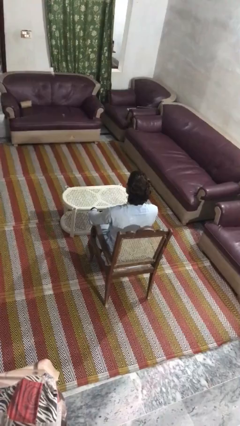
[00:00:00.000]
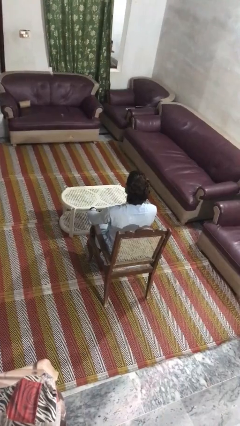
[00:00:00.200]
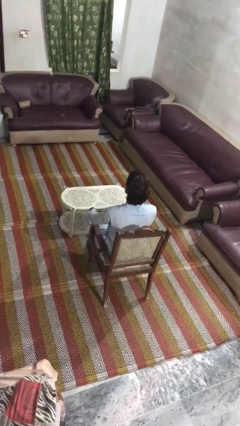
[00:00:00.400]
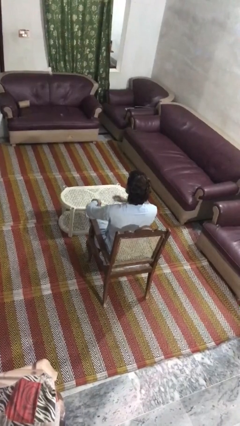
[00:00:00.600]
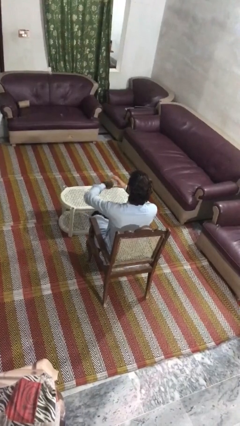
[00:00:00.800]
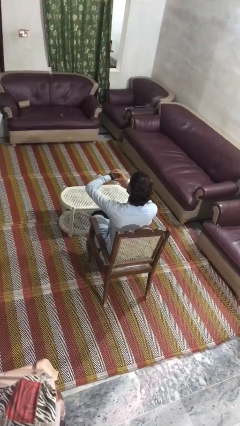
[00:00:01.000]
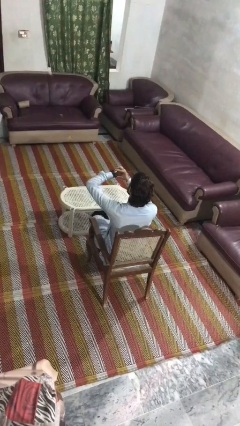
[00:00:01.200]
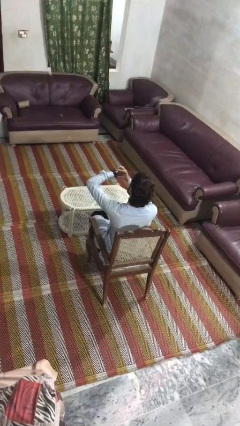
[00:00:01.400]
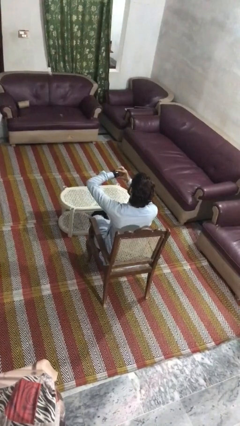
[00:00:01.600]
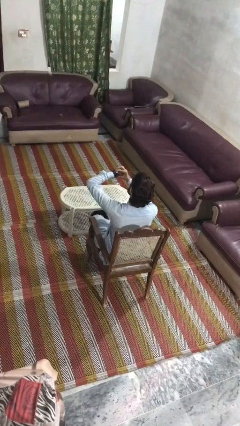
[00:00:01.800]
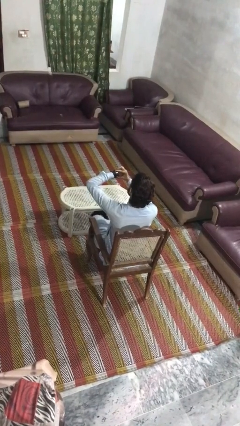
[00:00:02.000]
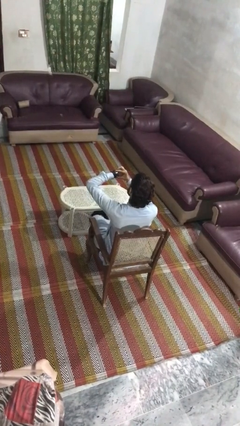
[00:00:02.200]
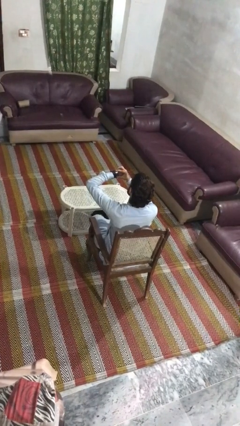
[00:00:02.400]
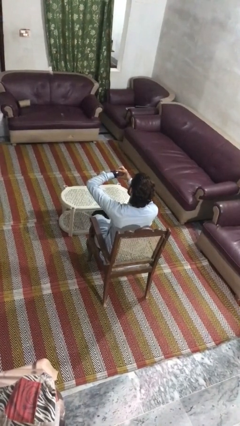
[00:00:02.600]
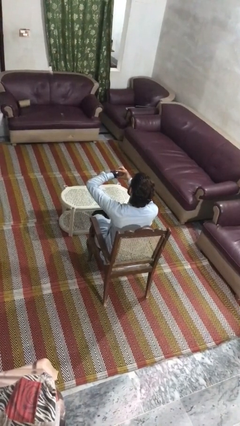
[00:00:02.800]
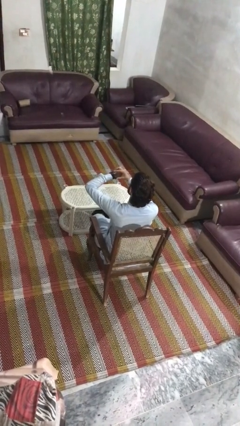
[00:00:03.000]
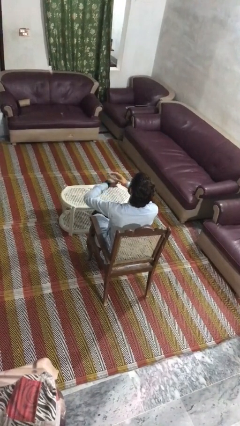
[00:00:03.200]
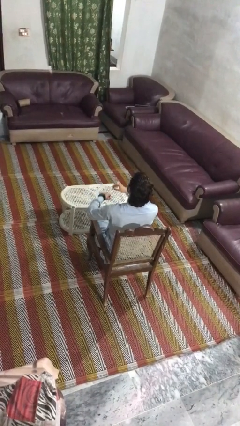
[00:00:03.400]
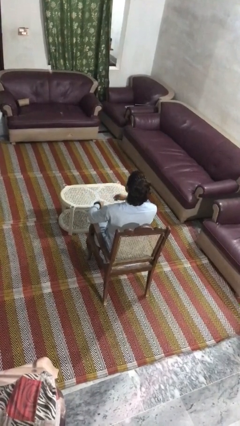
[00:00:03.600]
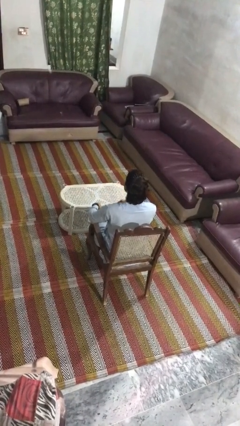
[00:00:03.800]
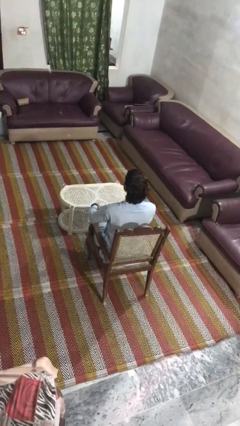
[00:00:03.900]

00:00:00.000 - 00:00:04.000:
person looks at wristwatch

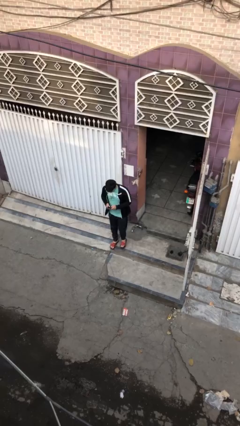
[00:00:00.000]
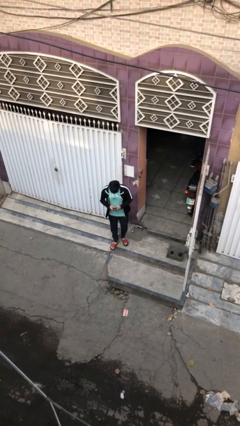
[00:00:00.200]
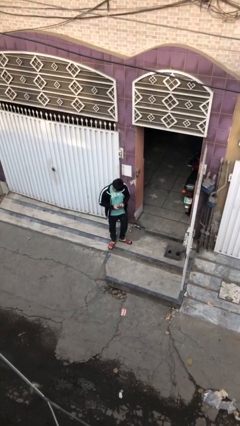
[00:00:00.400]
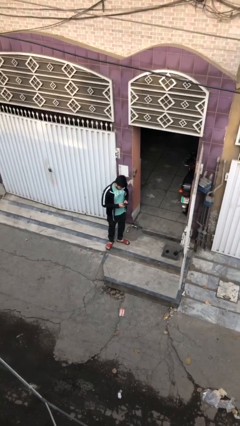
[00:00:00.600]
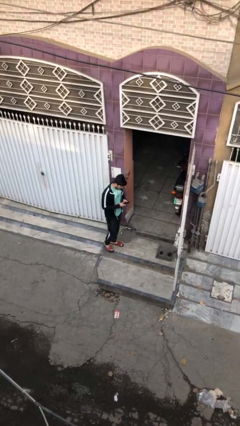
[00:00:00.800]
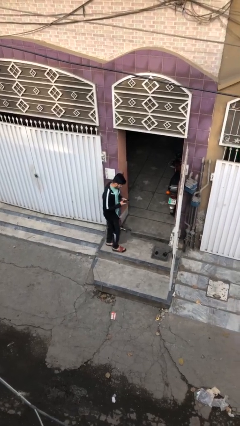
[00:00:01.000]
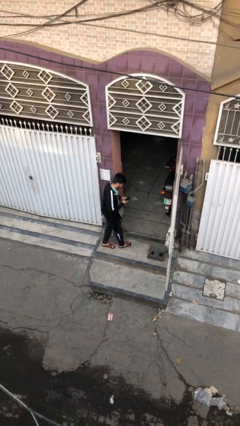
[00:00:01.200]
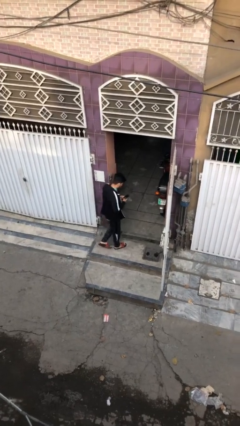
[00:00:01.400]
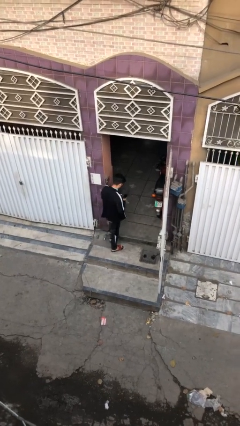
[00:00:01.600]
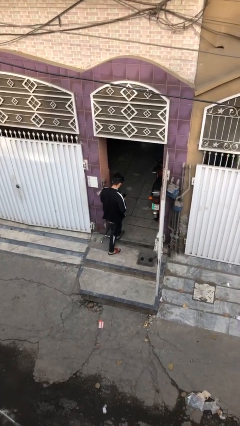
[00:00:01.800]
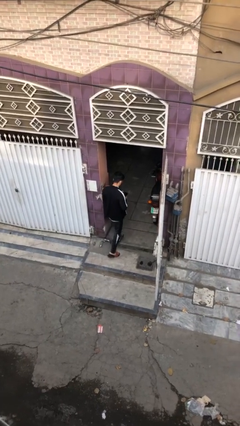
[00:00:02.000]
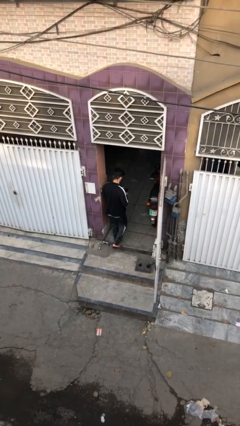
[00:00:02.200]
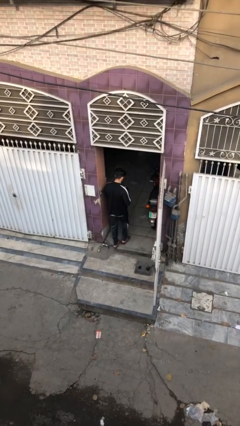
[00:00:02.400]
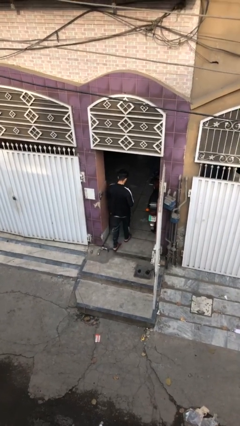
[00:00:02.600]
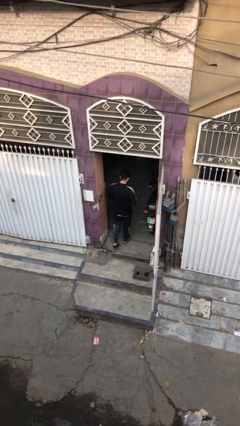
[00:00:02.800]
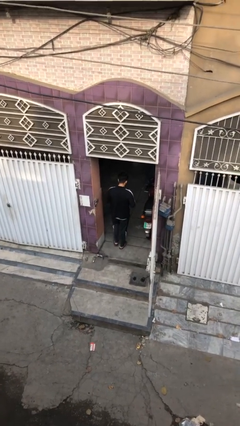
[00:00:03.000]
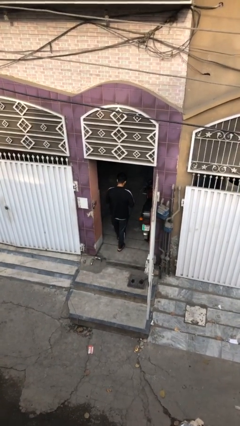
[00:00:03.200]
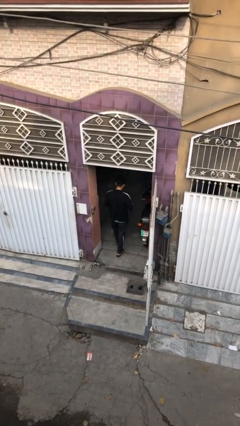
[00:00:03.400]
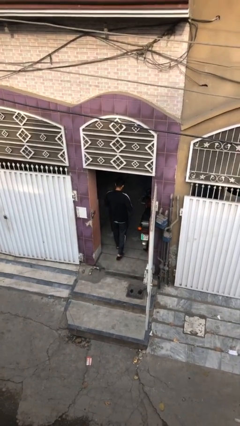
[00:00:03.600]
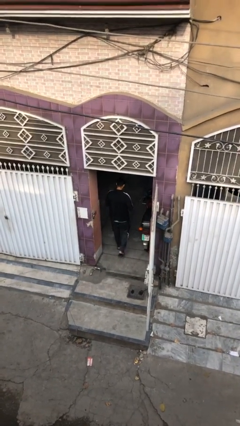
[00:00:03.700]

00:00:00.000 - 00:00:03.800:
person exits scene through structure

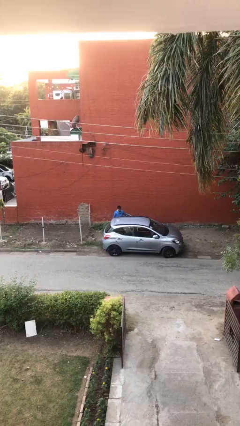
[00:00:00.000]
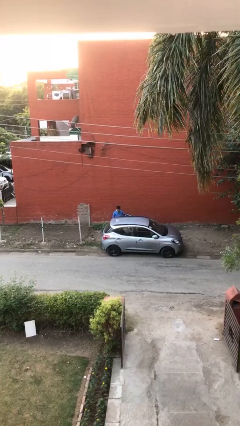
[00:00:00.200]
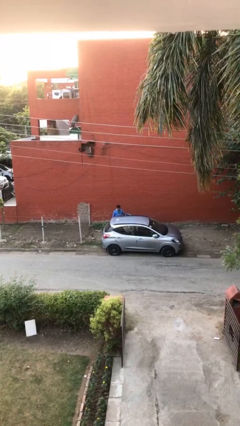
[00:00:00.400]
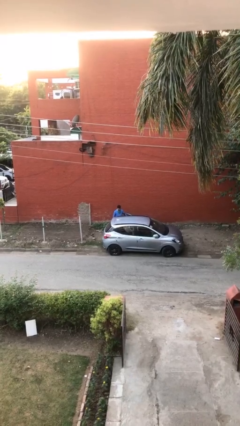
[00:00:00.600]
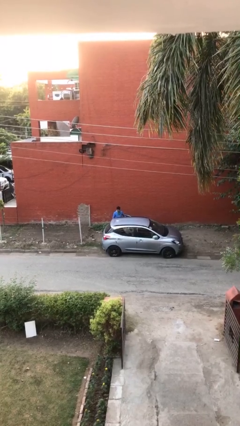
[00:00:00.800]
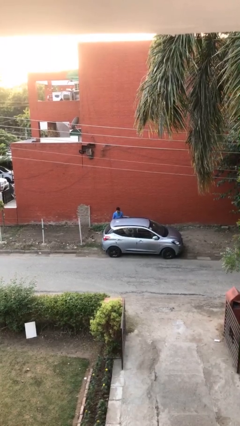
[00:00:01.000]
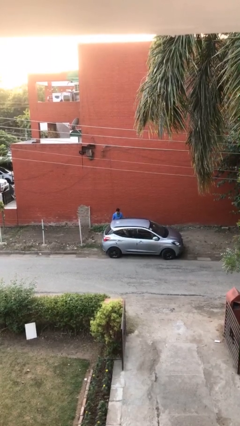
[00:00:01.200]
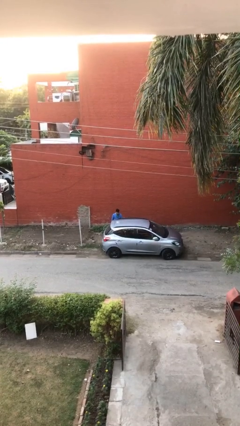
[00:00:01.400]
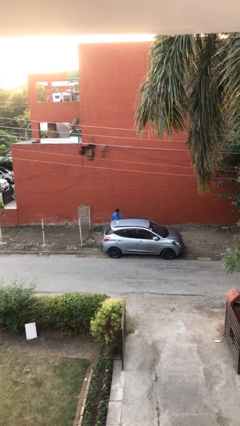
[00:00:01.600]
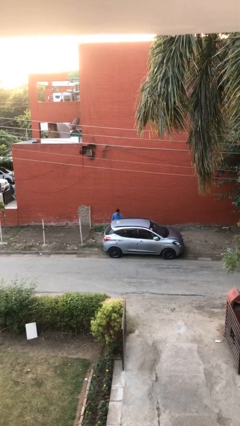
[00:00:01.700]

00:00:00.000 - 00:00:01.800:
person closes car door

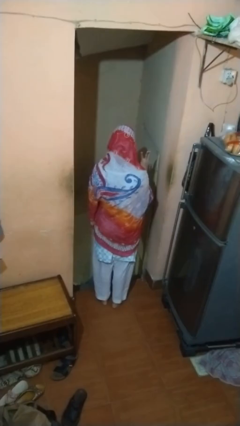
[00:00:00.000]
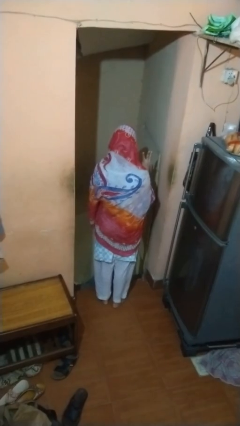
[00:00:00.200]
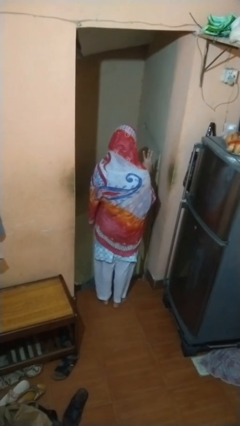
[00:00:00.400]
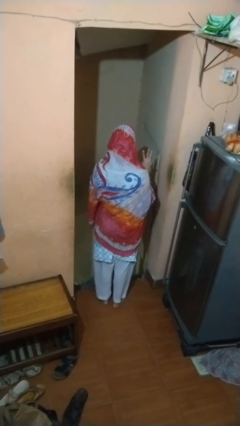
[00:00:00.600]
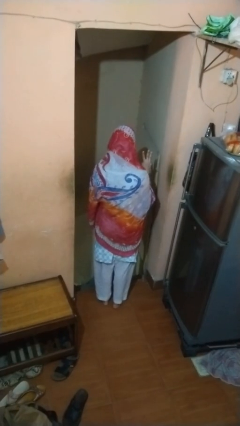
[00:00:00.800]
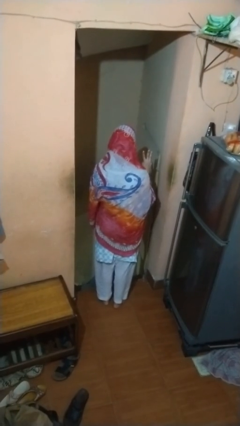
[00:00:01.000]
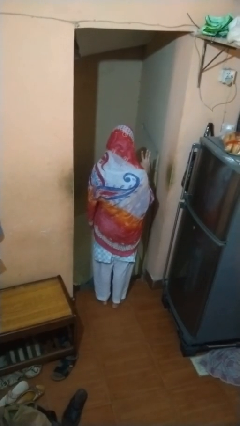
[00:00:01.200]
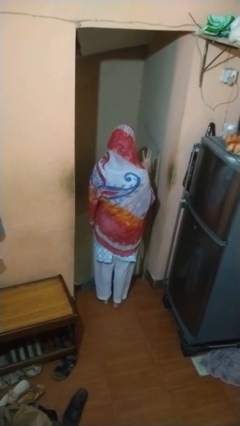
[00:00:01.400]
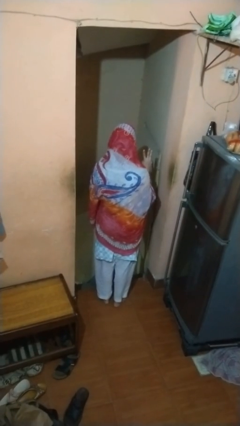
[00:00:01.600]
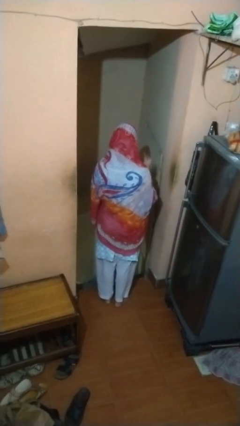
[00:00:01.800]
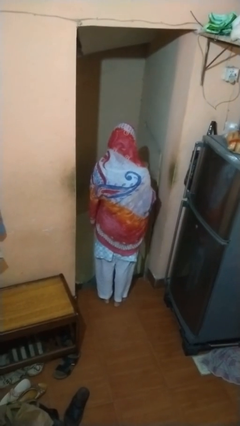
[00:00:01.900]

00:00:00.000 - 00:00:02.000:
person gestures number three

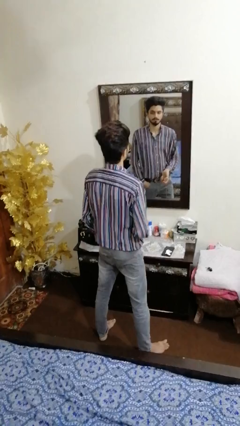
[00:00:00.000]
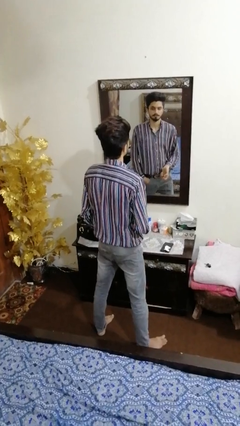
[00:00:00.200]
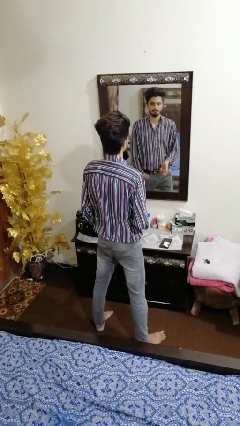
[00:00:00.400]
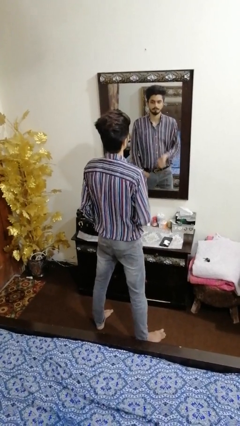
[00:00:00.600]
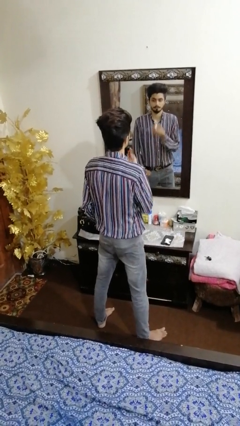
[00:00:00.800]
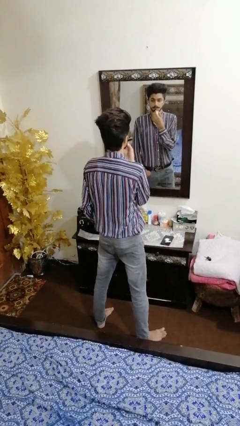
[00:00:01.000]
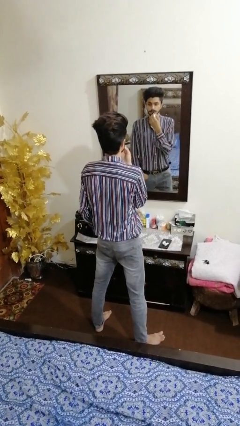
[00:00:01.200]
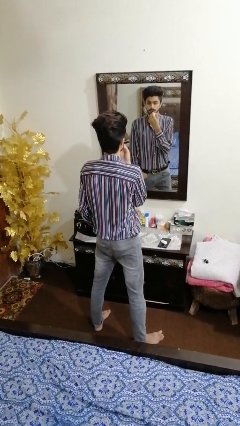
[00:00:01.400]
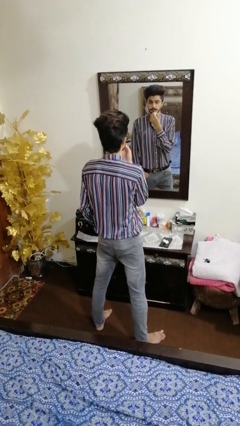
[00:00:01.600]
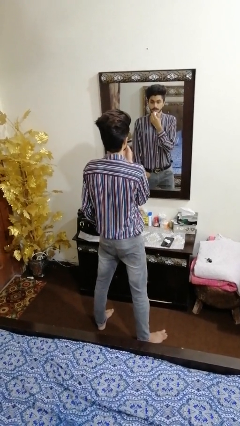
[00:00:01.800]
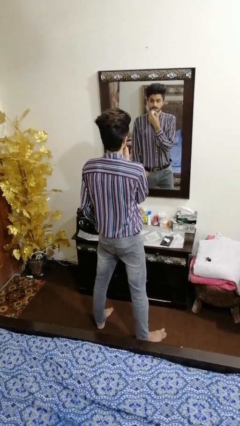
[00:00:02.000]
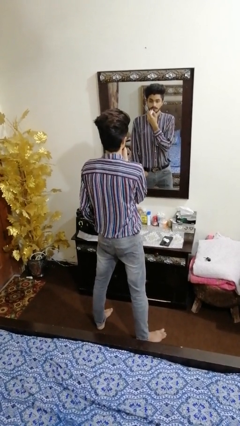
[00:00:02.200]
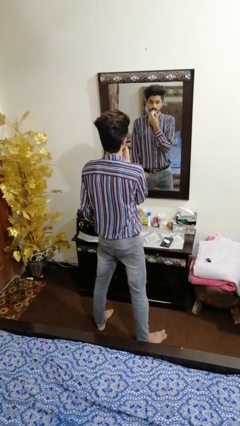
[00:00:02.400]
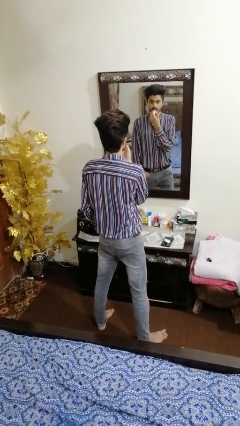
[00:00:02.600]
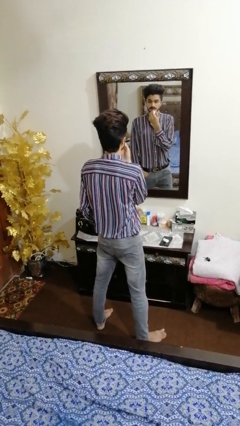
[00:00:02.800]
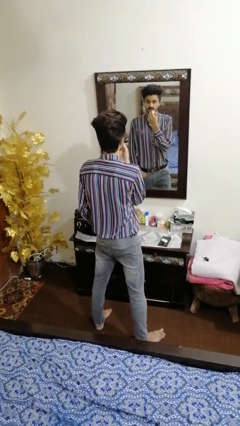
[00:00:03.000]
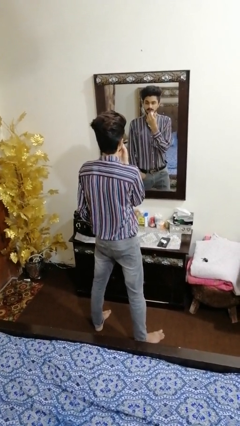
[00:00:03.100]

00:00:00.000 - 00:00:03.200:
person applies lip makeup

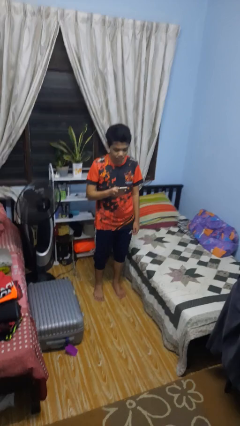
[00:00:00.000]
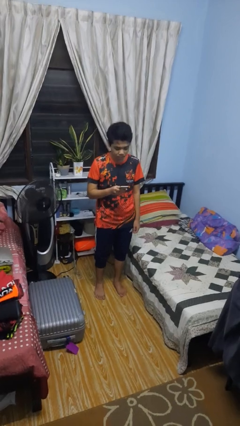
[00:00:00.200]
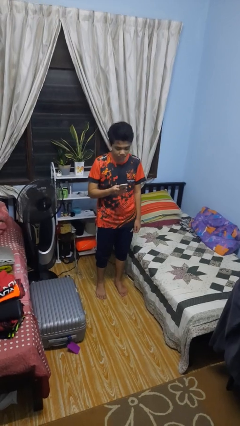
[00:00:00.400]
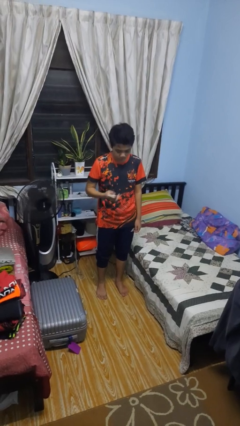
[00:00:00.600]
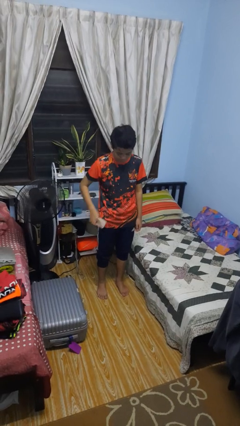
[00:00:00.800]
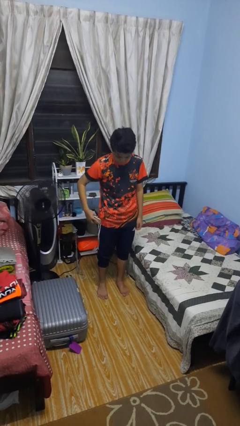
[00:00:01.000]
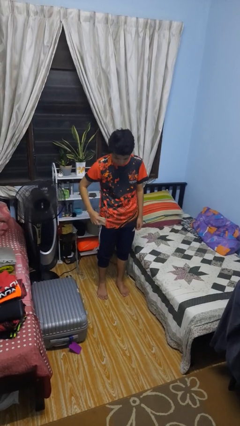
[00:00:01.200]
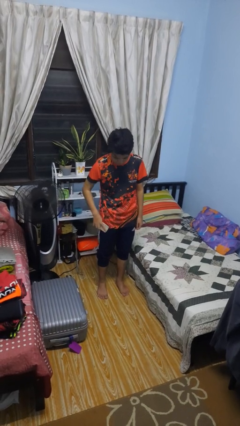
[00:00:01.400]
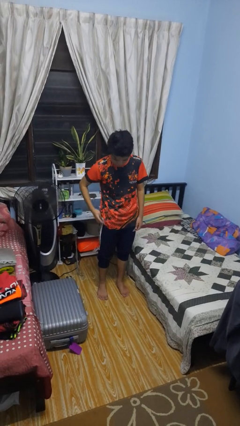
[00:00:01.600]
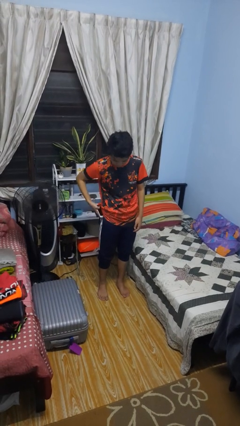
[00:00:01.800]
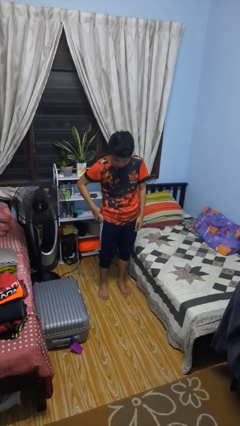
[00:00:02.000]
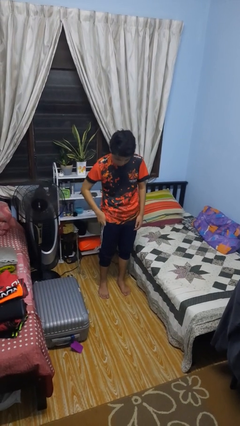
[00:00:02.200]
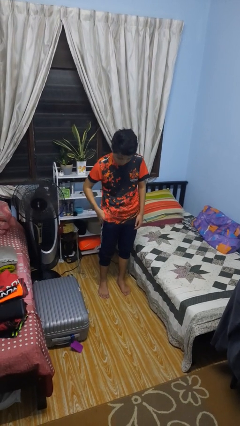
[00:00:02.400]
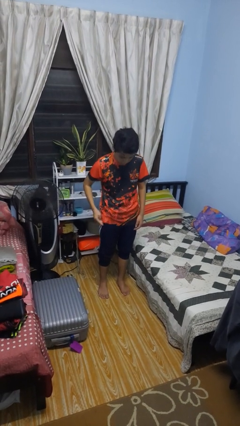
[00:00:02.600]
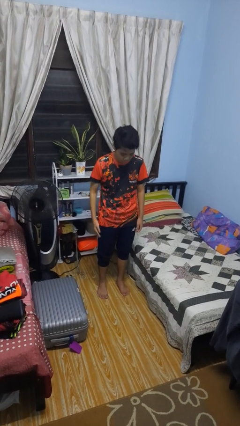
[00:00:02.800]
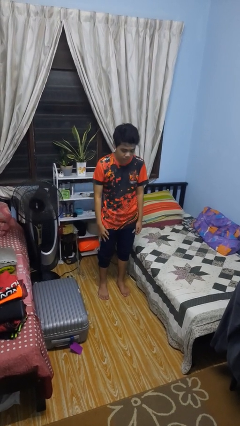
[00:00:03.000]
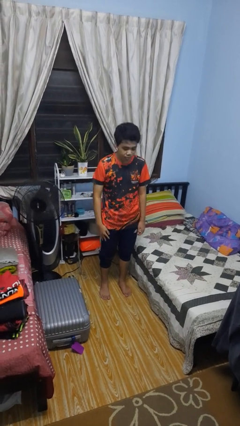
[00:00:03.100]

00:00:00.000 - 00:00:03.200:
person puts phone into pocket
